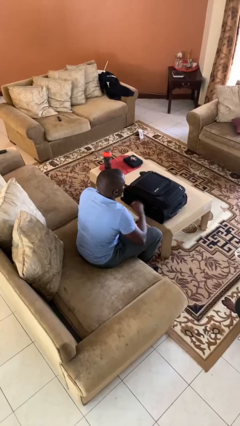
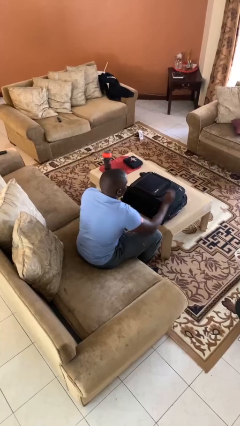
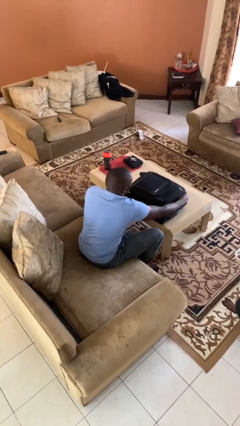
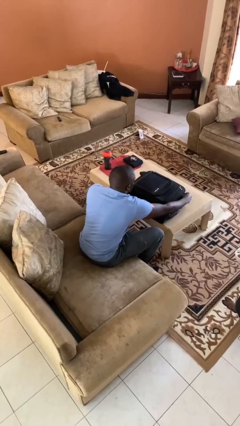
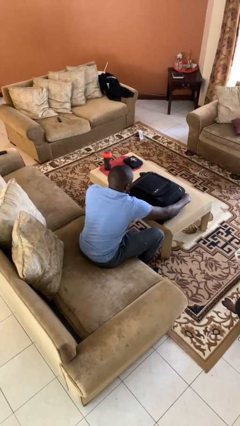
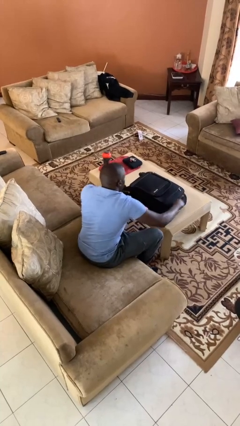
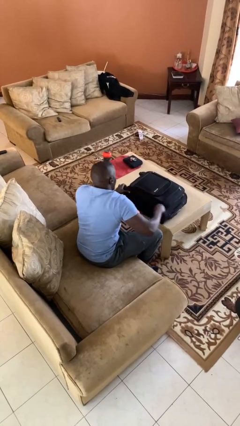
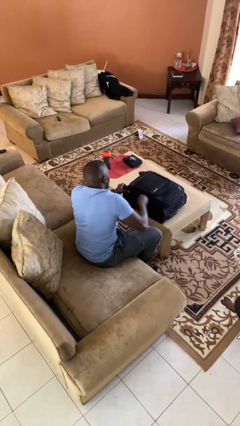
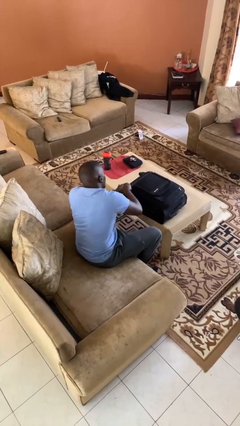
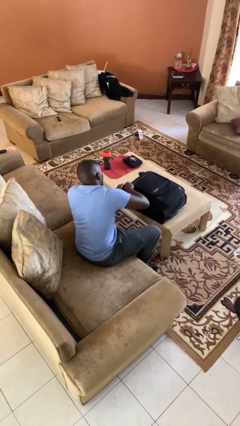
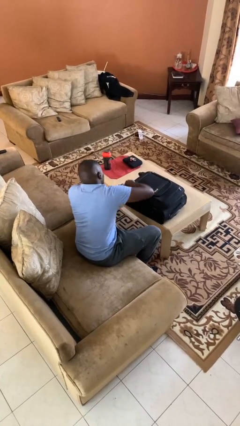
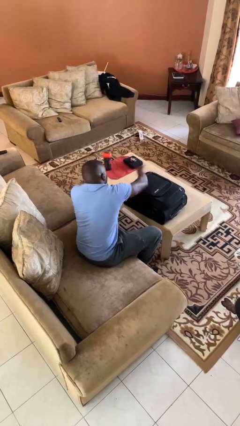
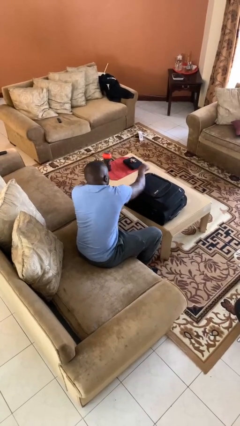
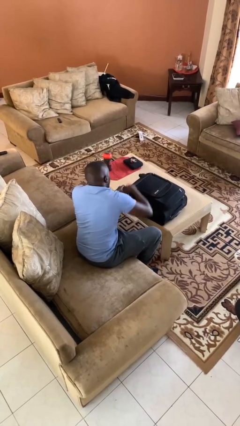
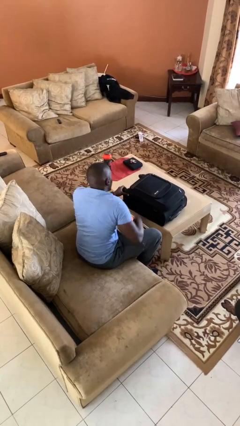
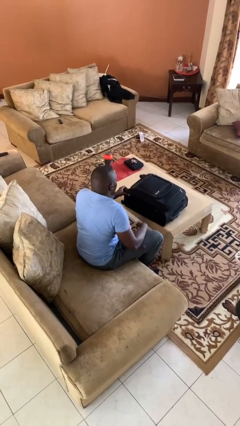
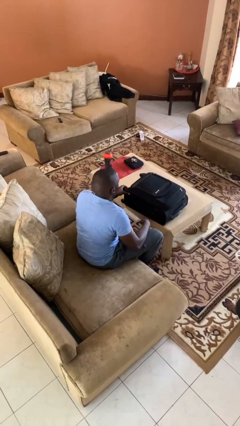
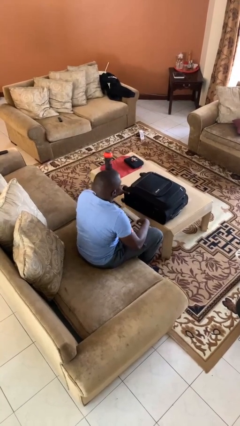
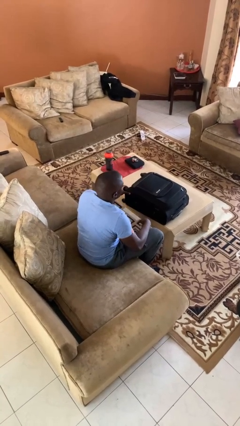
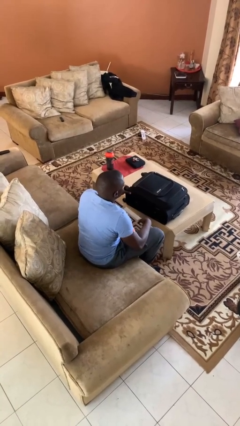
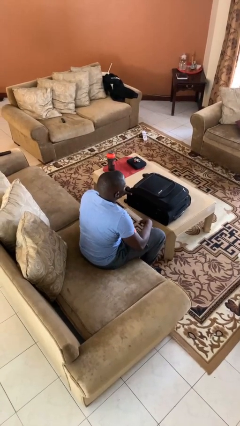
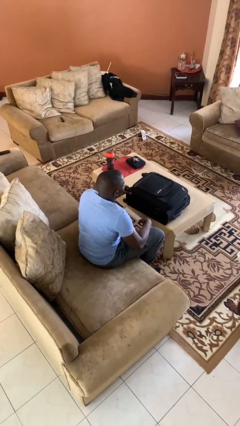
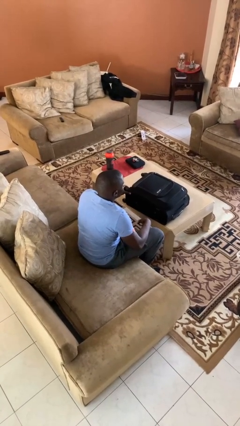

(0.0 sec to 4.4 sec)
person opens suitcase

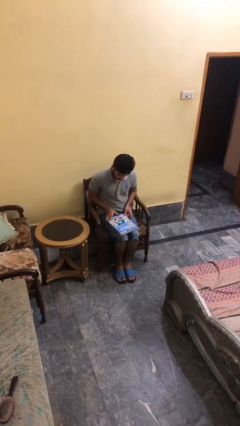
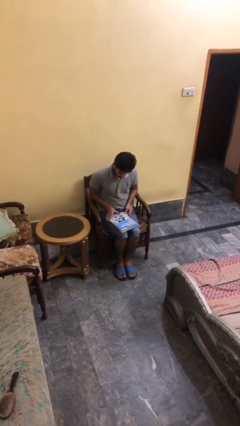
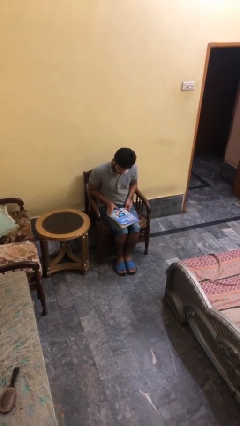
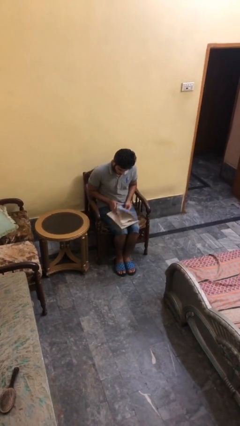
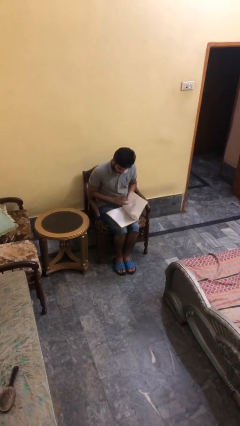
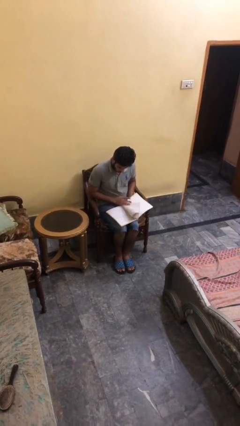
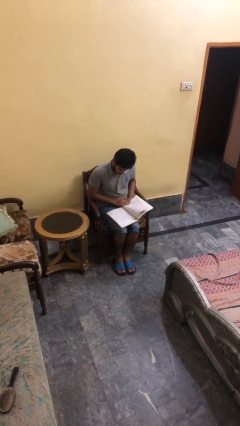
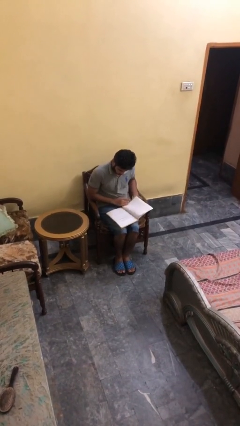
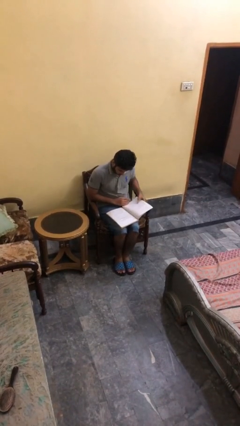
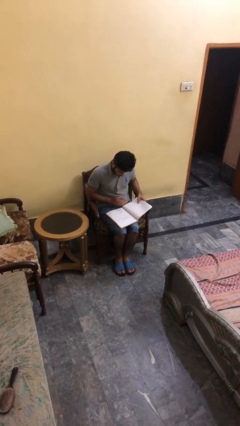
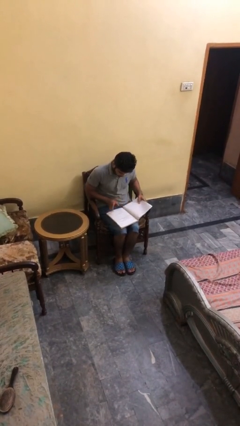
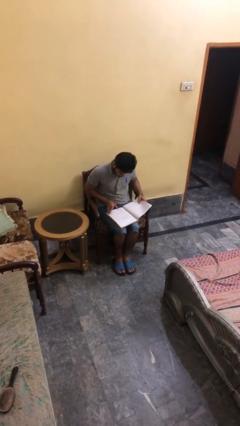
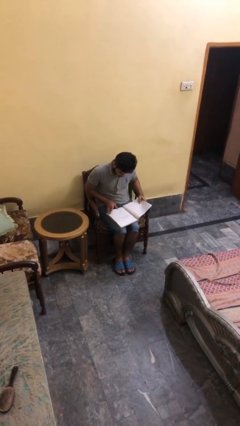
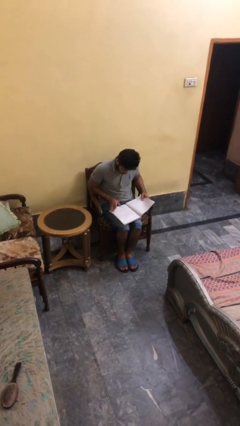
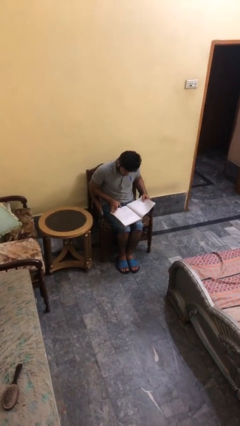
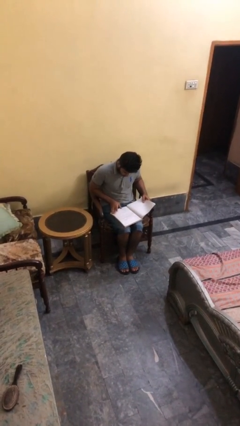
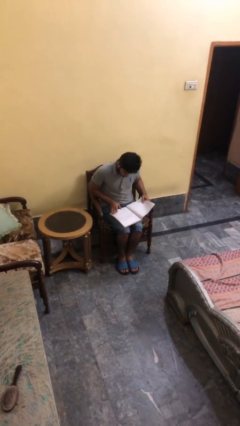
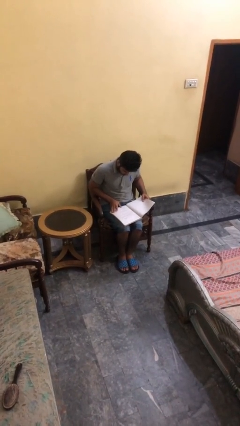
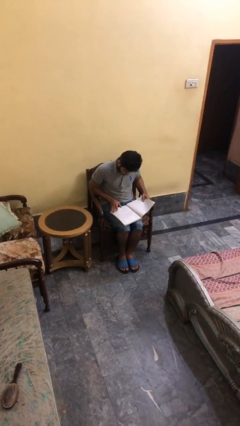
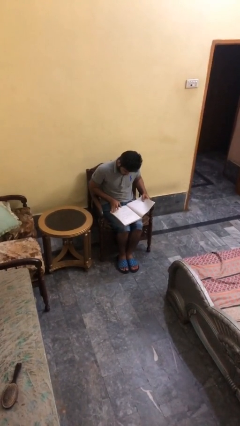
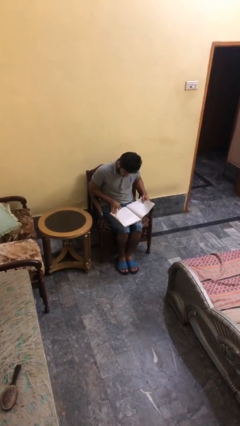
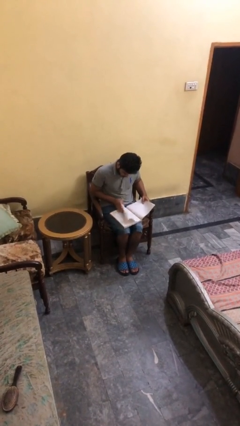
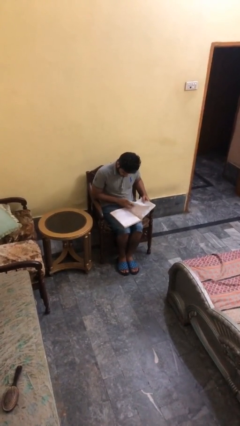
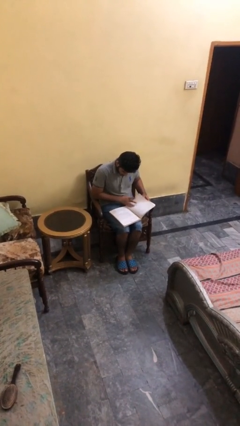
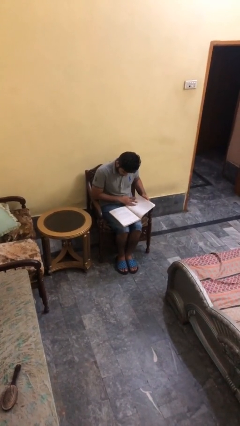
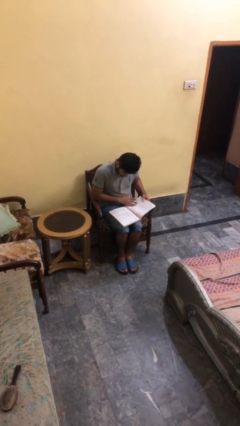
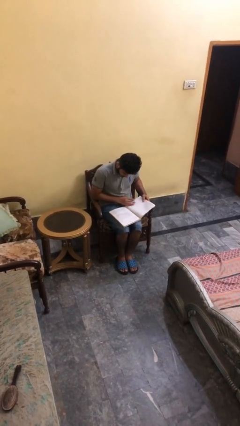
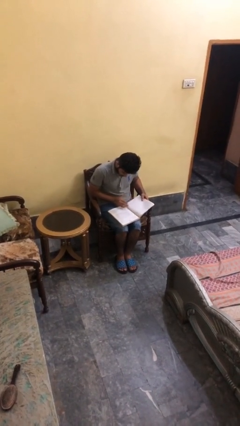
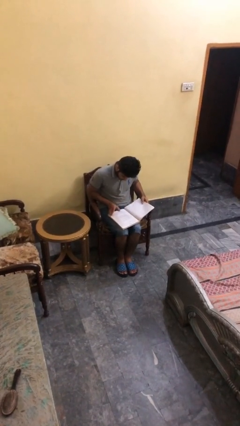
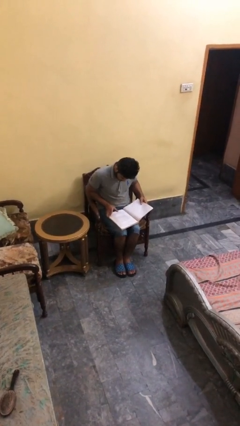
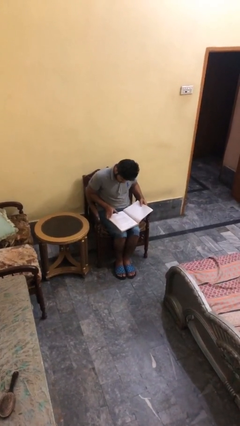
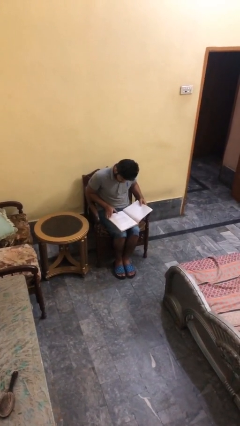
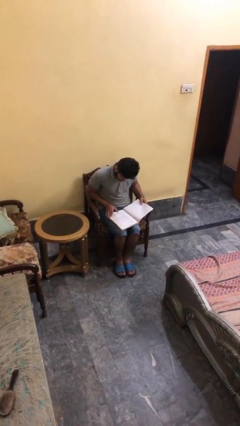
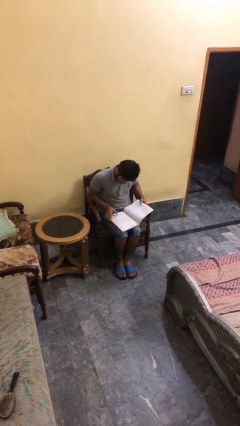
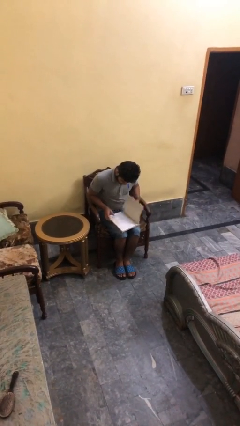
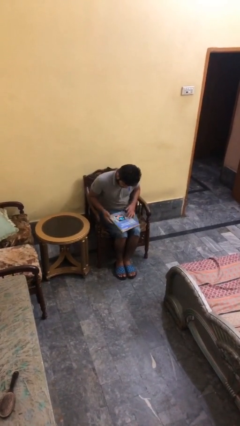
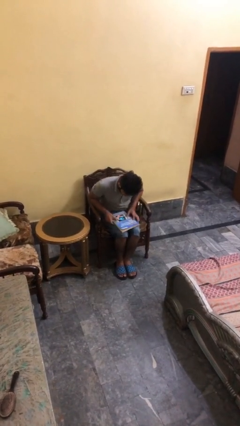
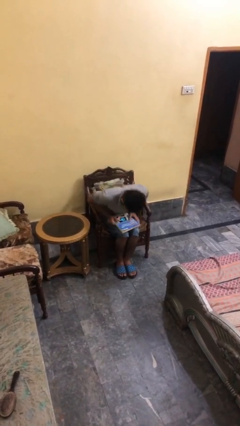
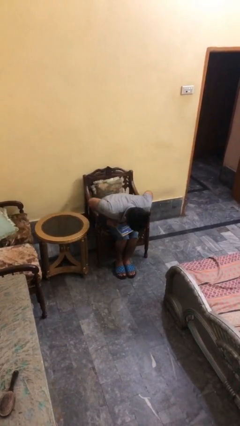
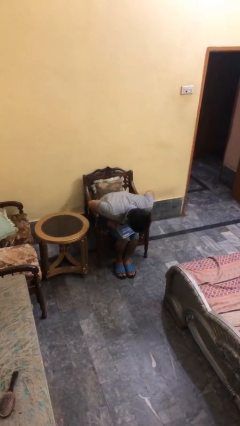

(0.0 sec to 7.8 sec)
person reads document

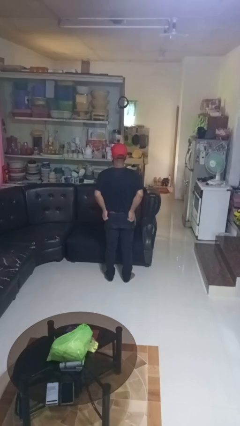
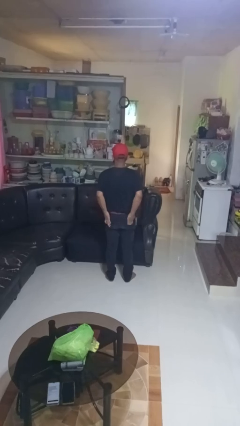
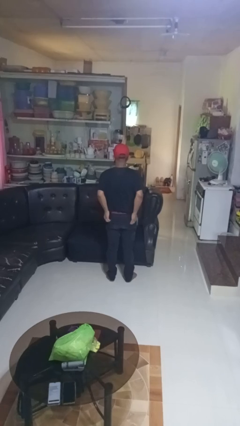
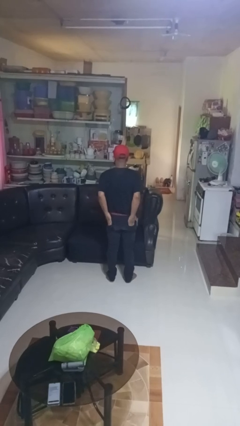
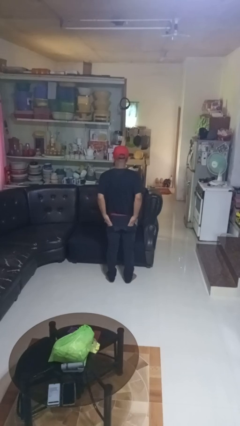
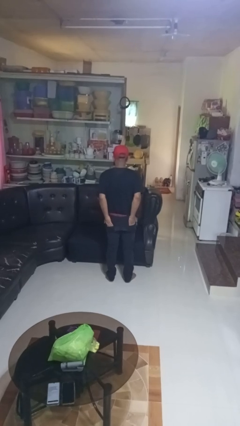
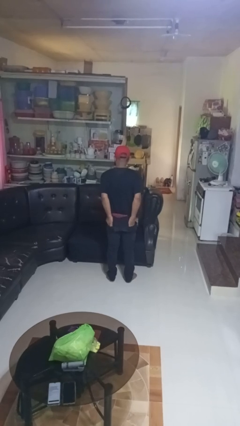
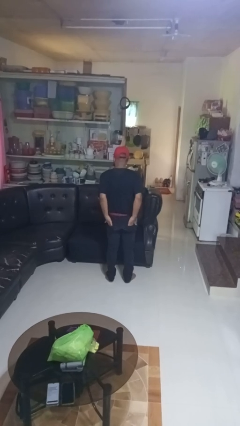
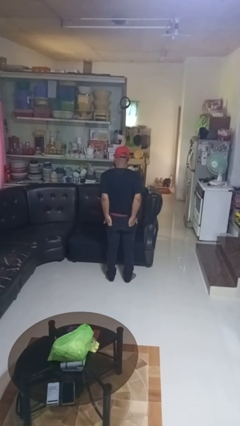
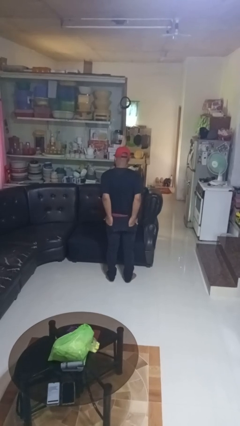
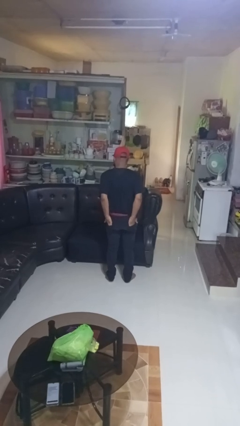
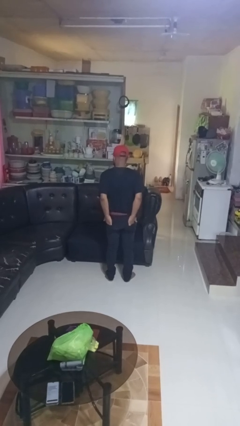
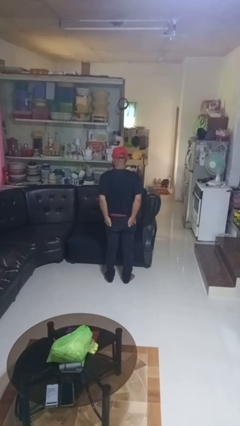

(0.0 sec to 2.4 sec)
person puts hands in back pockets

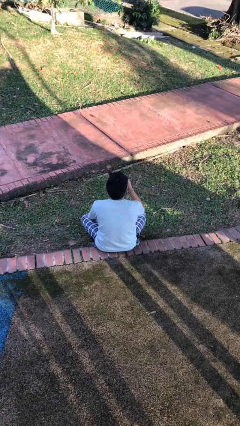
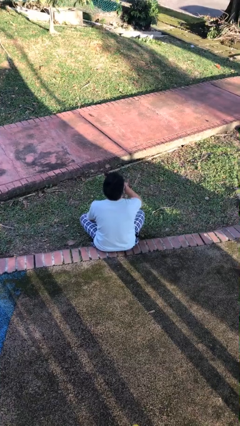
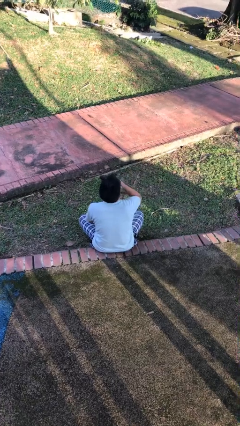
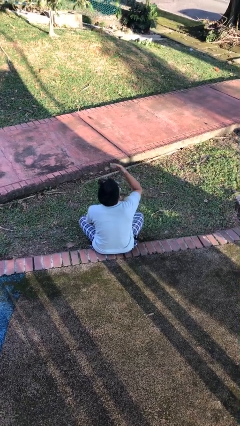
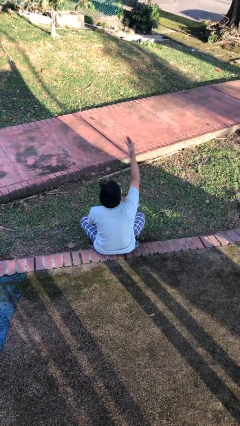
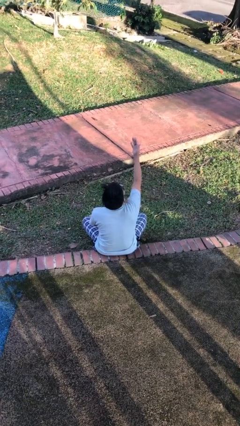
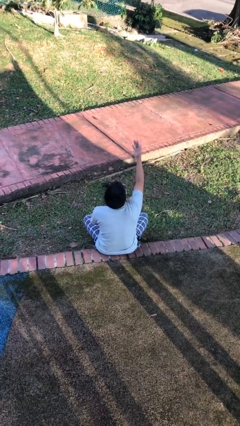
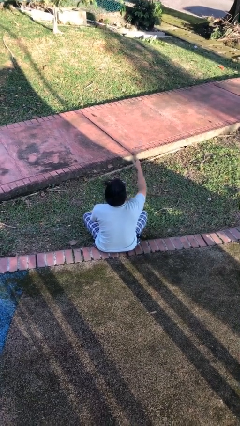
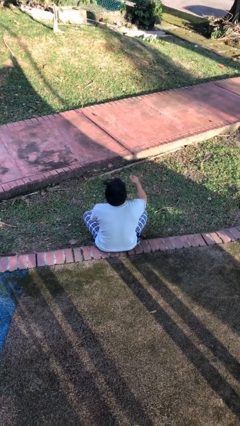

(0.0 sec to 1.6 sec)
person gestures blow kiss

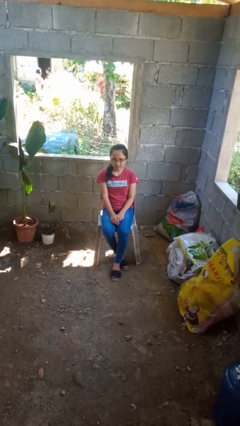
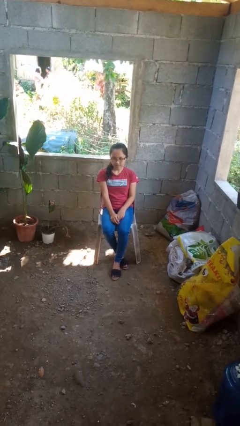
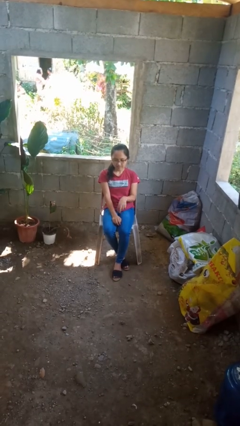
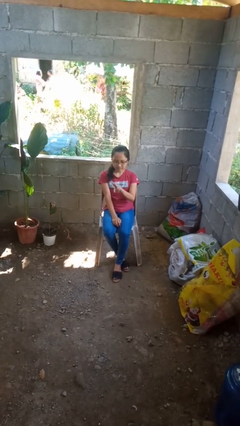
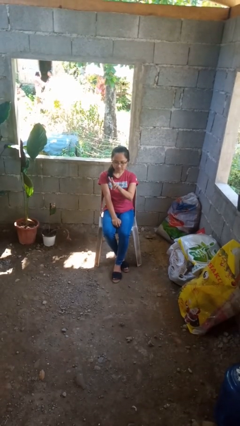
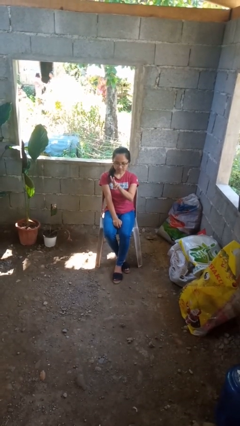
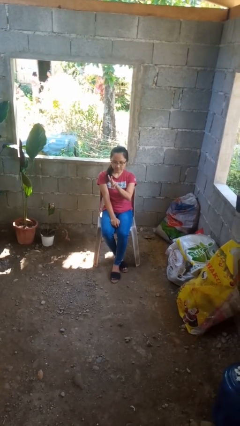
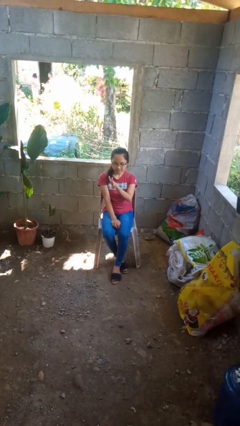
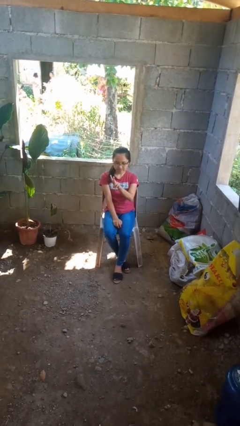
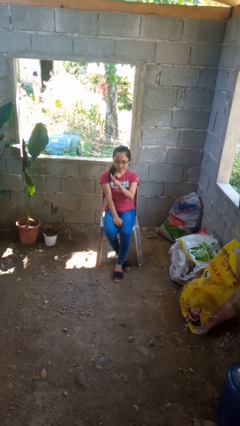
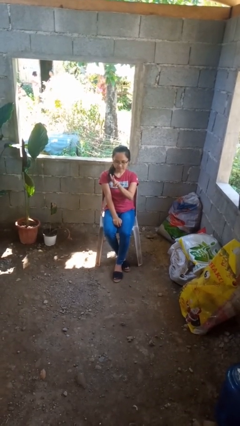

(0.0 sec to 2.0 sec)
person gestures peace
